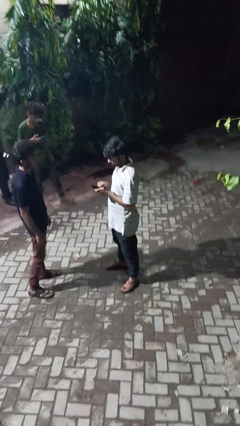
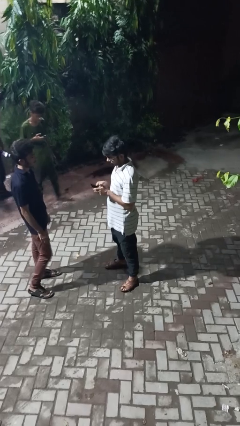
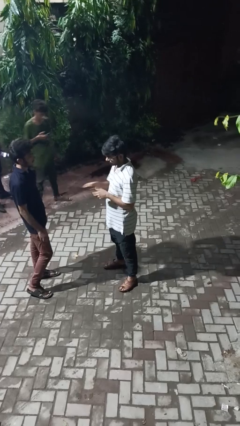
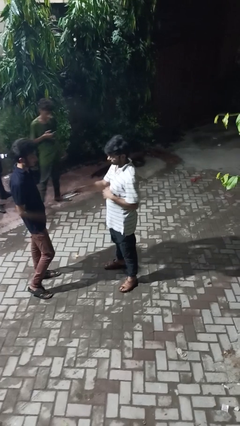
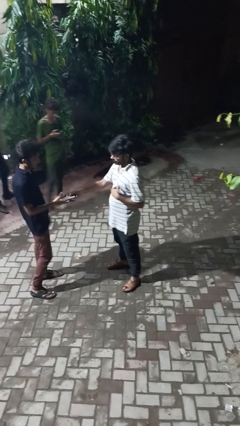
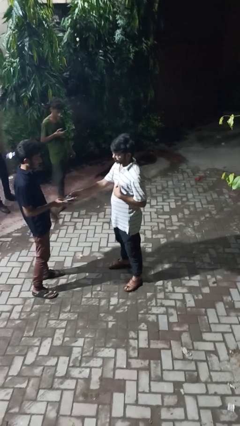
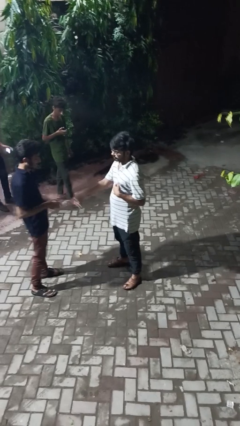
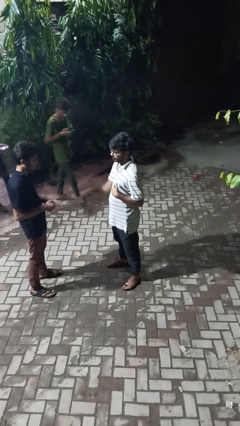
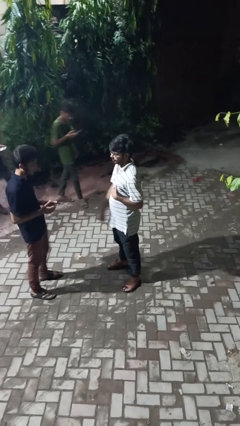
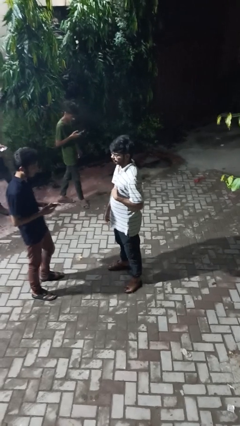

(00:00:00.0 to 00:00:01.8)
person transfers object to person

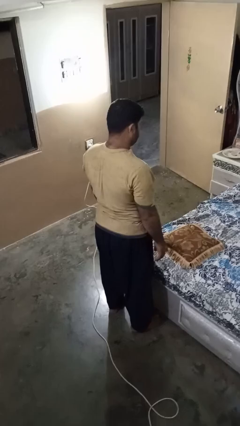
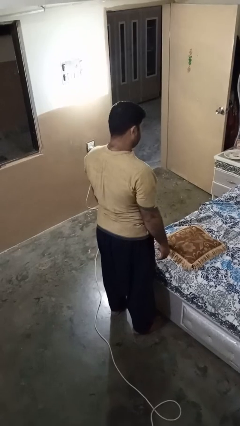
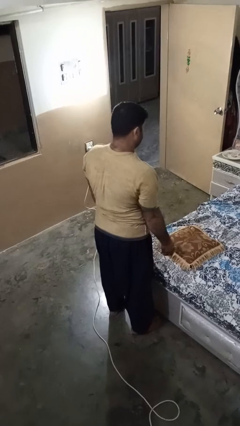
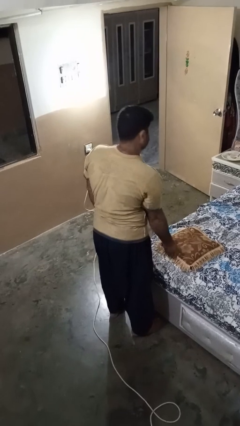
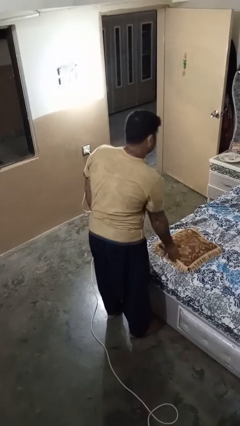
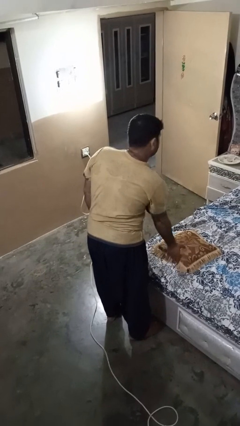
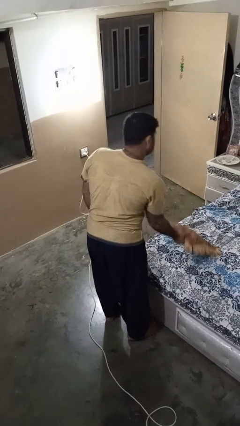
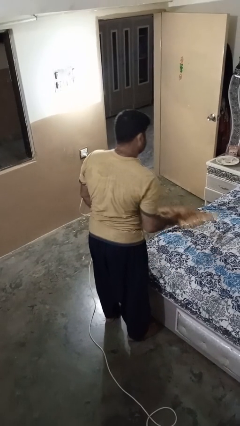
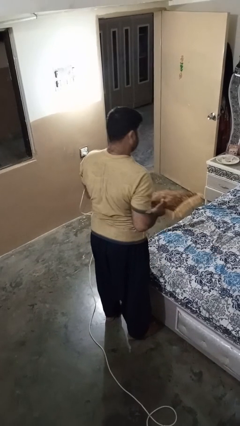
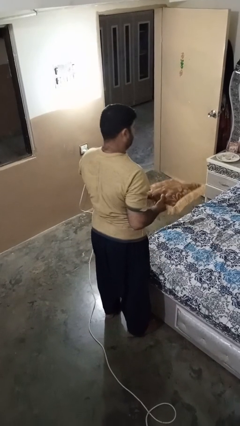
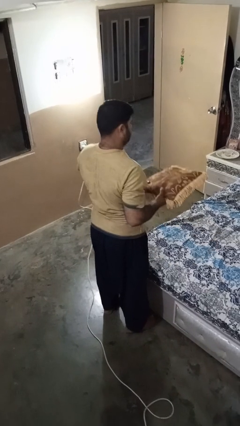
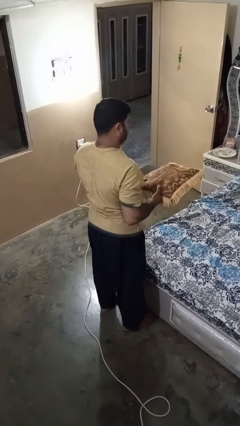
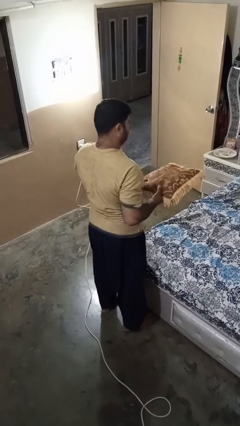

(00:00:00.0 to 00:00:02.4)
person picks up object from bed

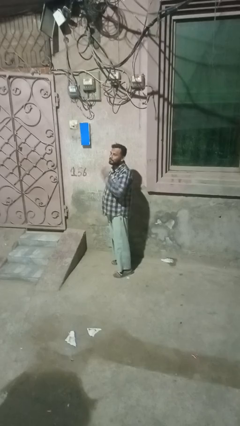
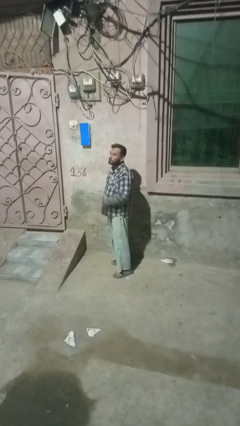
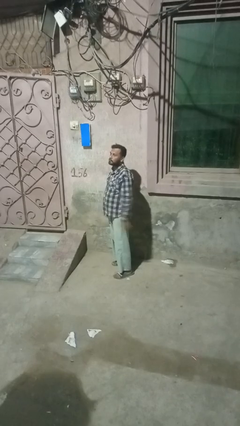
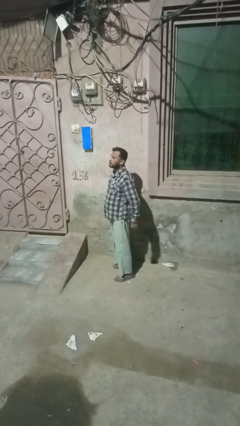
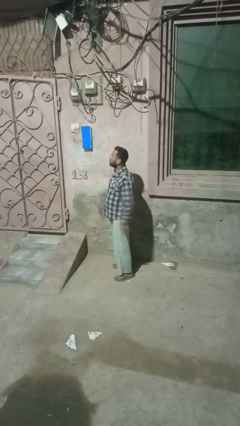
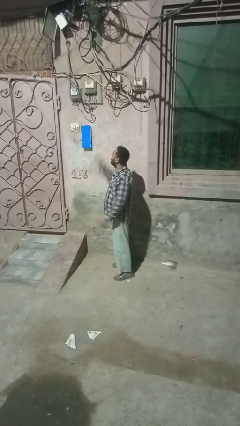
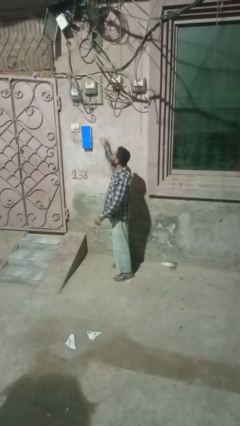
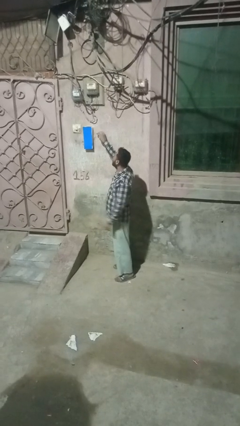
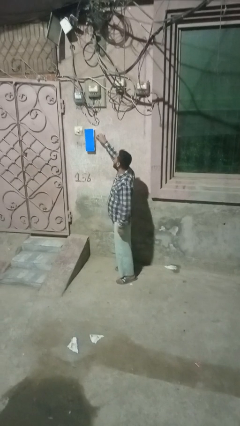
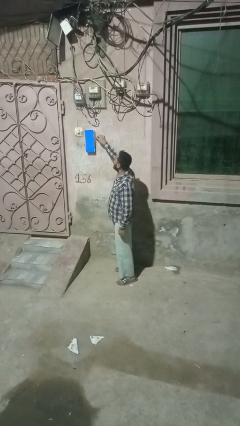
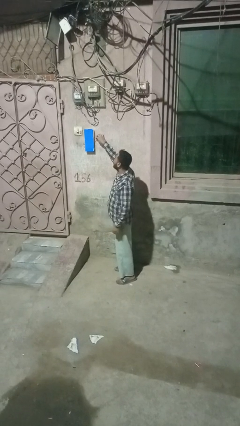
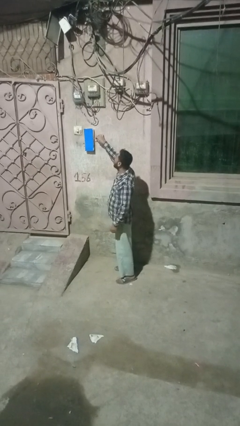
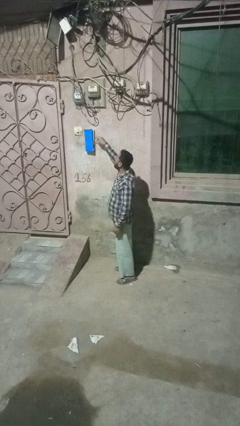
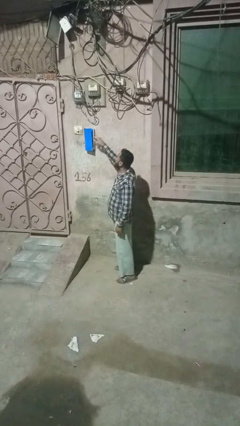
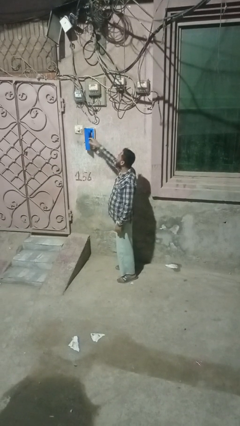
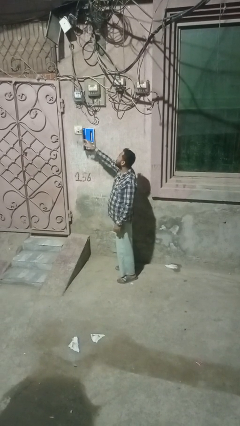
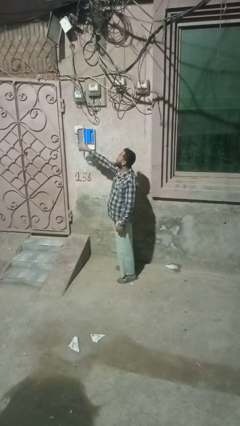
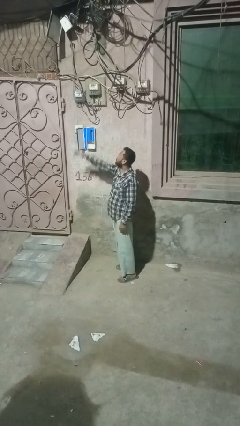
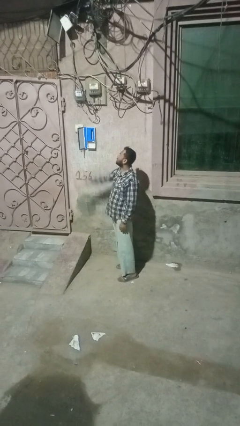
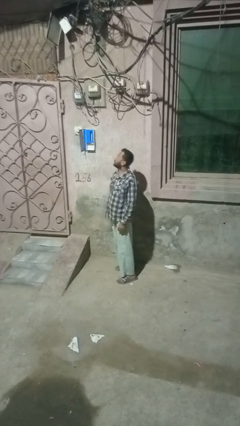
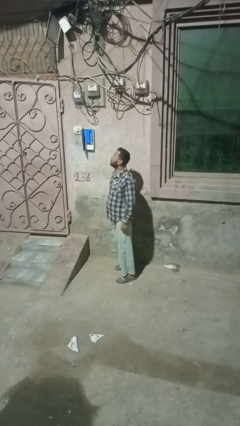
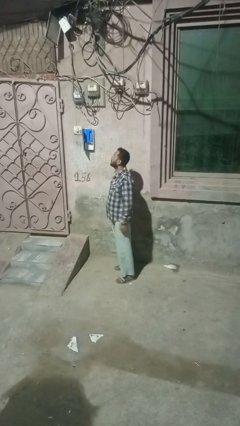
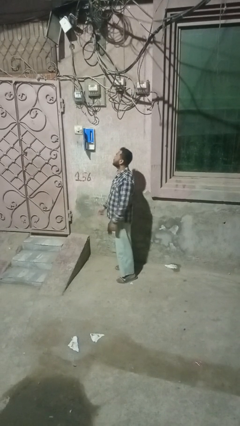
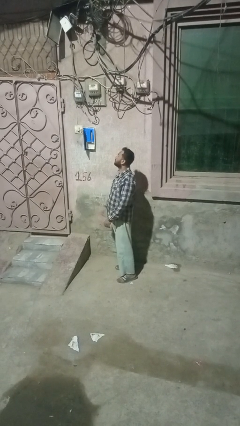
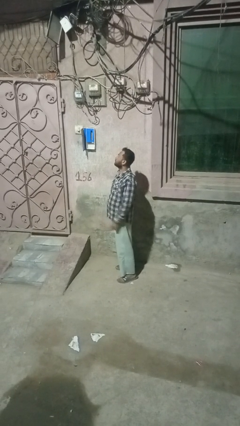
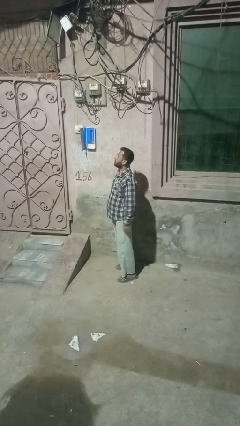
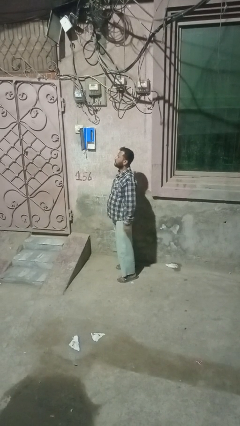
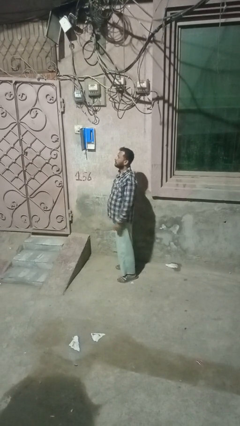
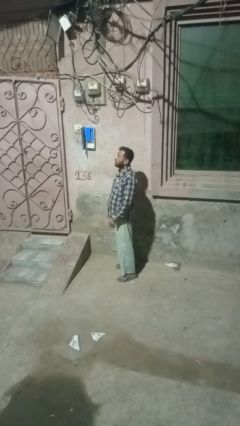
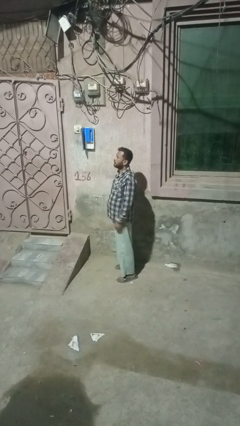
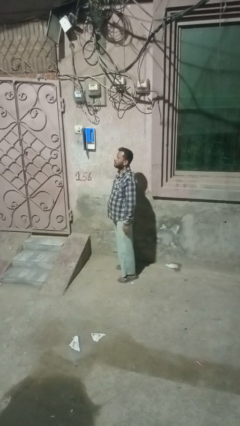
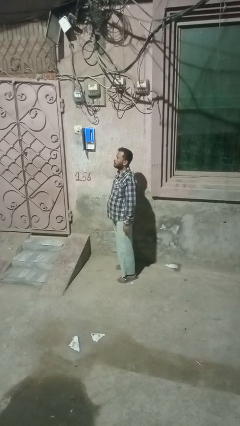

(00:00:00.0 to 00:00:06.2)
person opens mailbox

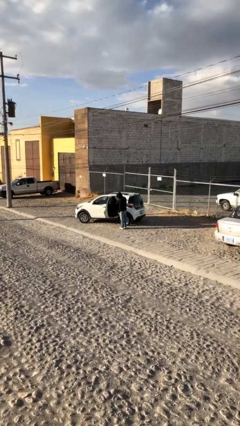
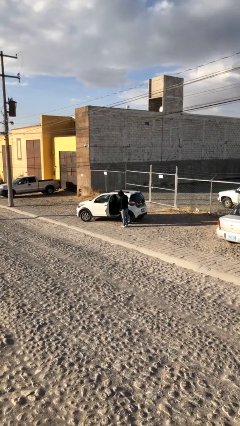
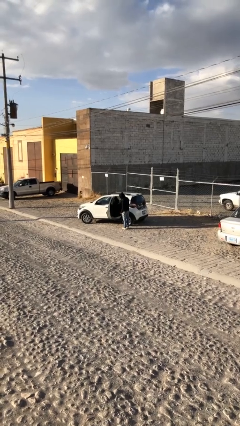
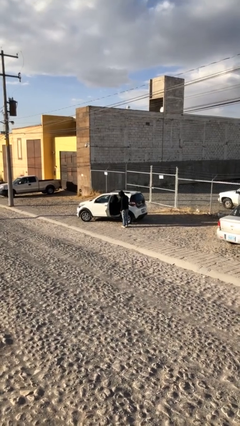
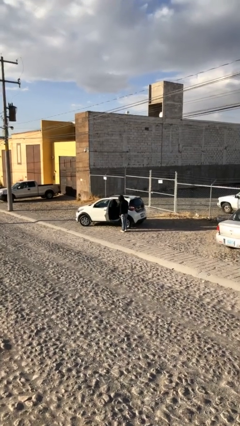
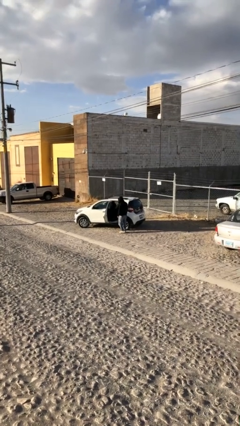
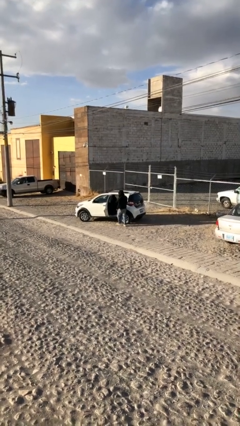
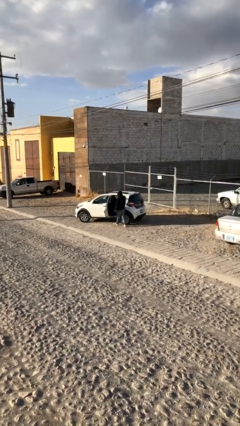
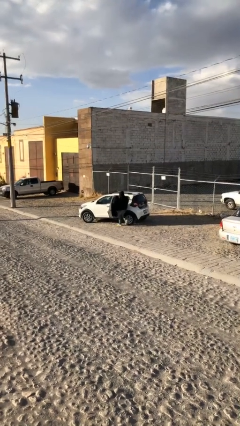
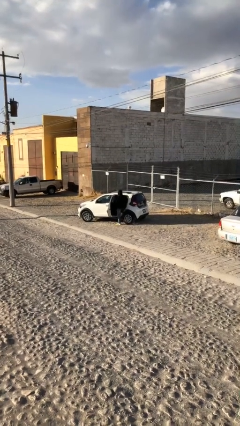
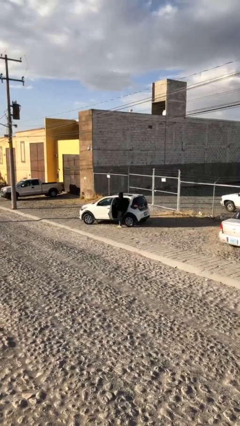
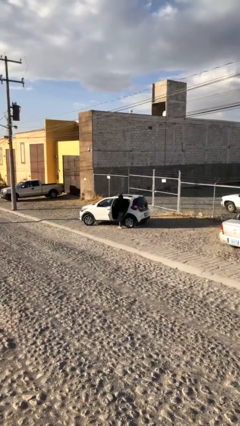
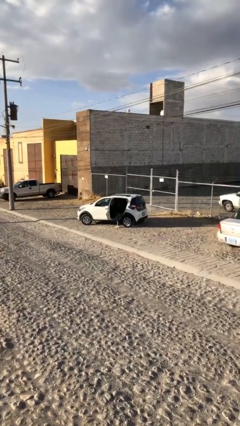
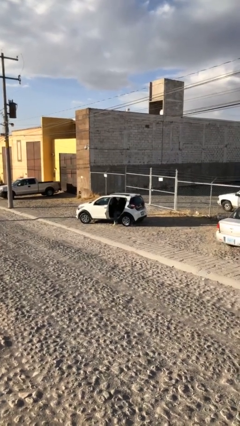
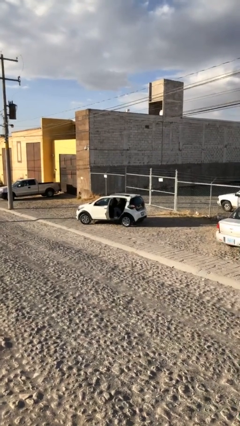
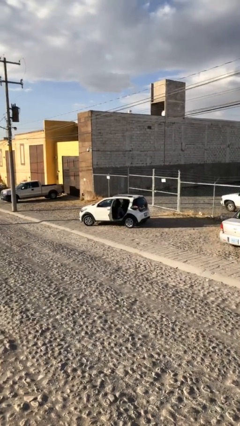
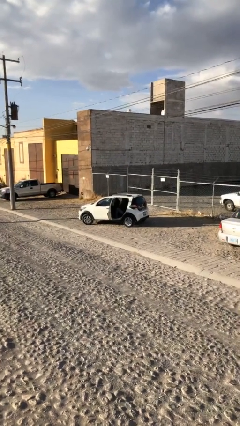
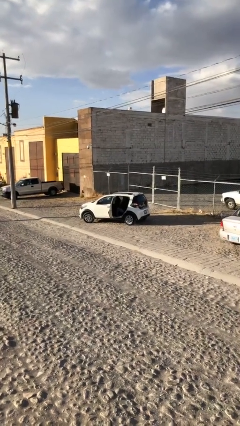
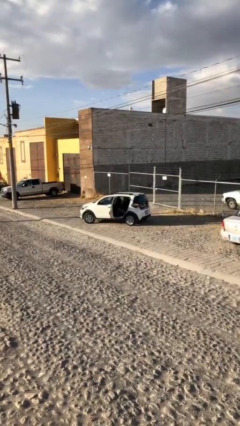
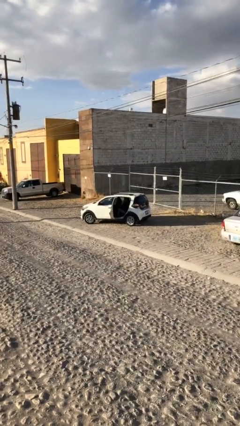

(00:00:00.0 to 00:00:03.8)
person enters car

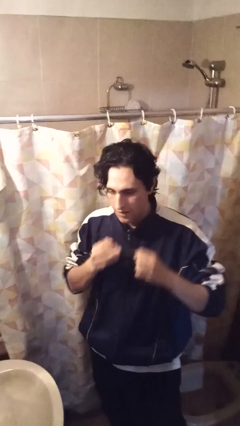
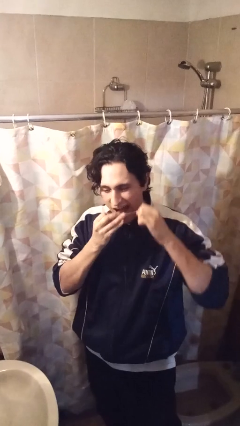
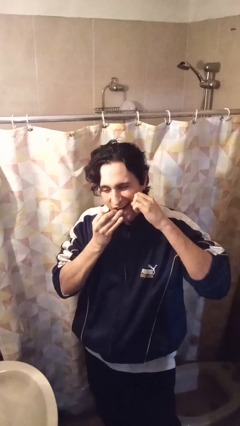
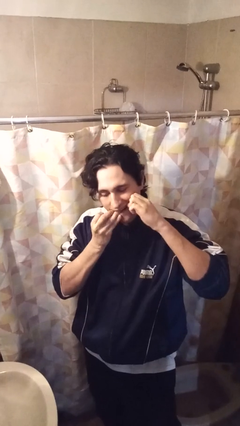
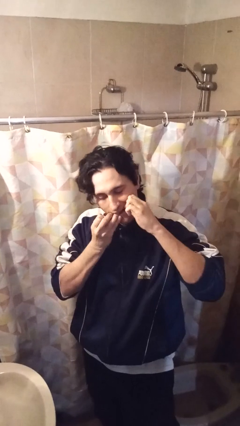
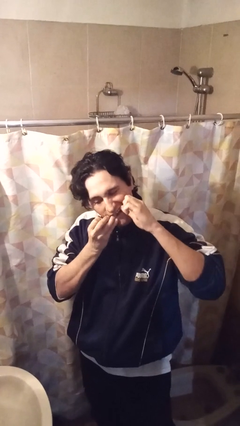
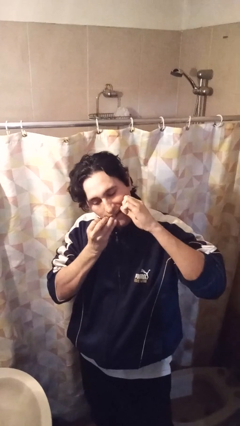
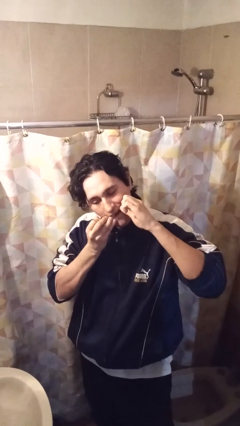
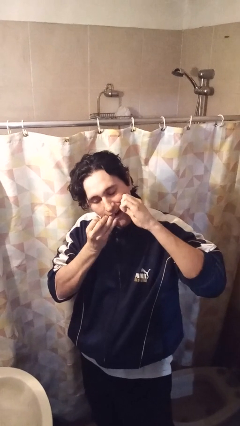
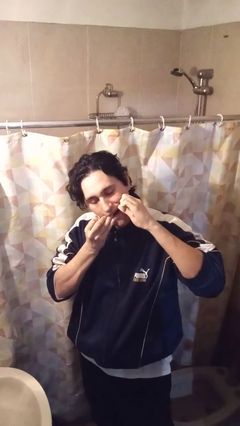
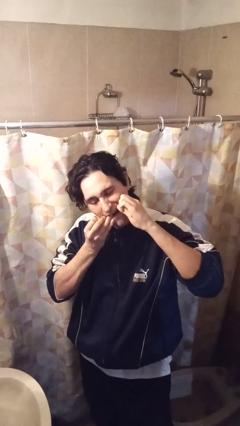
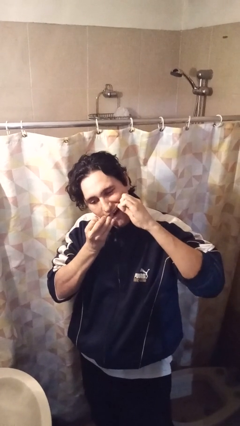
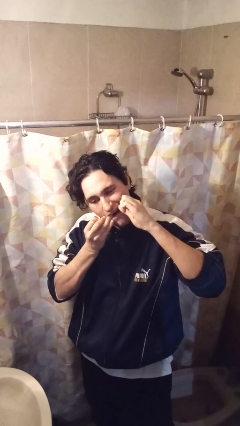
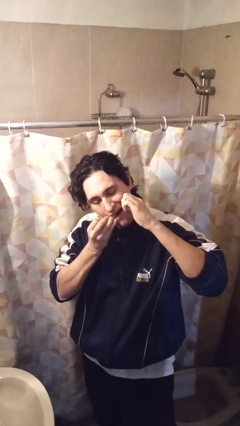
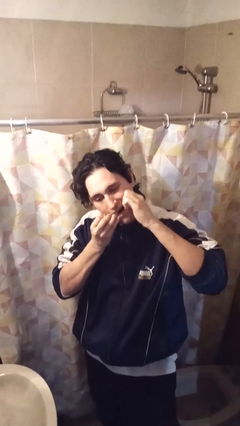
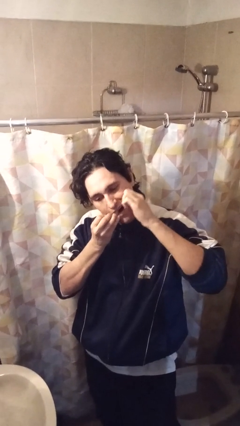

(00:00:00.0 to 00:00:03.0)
person flosses
